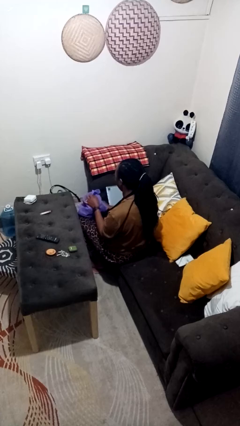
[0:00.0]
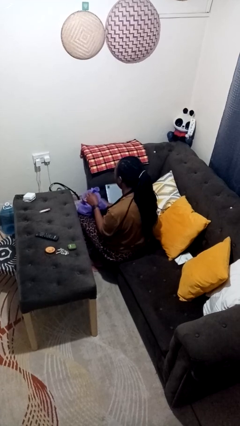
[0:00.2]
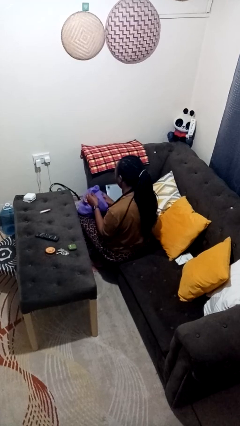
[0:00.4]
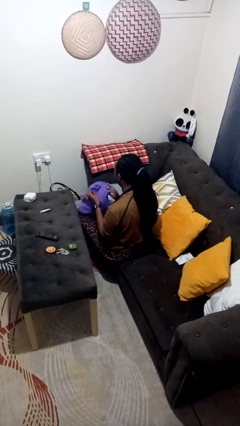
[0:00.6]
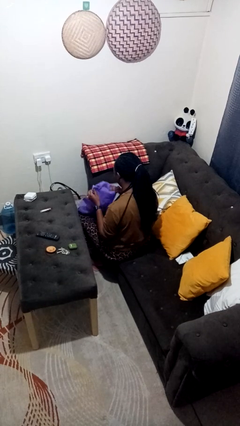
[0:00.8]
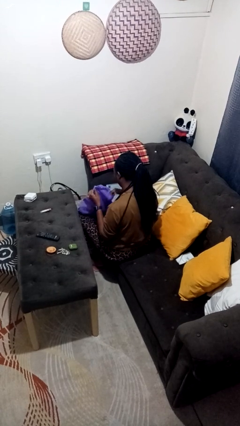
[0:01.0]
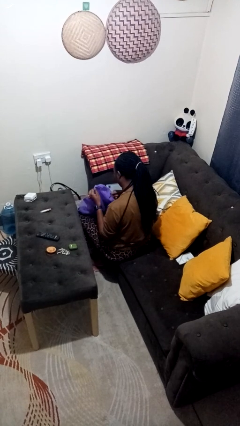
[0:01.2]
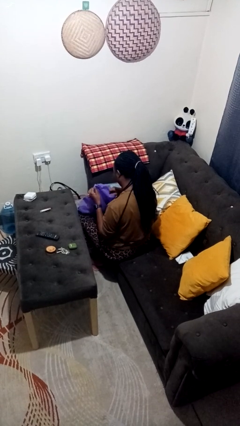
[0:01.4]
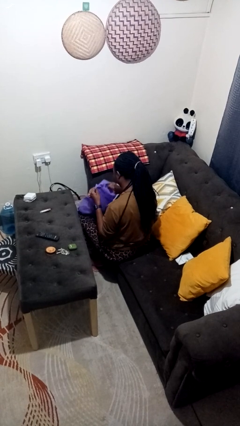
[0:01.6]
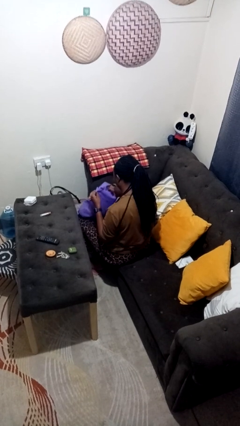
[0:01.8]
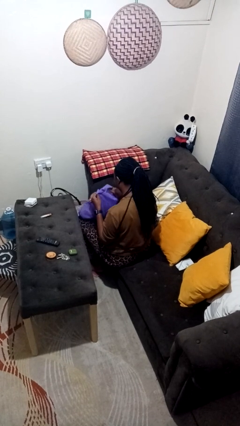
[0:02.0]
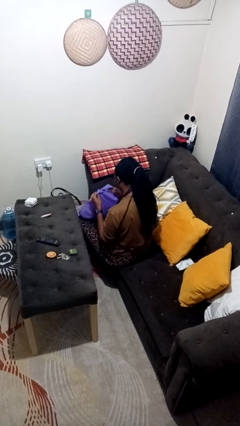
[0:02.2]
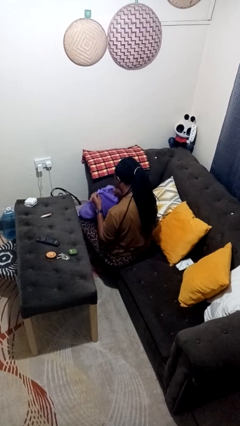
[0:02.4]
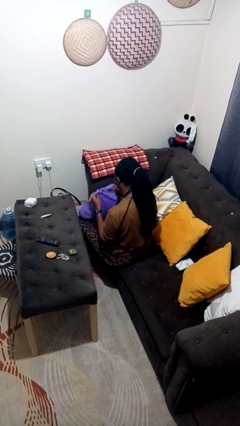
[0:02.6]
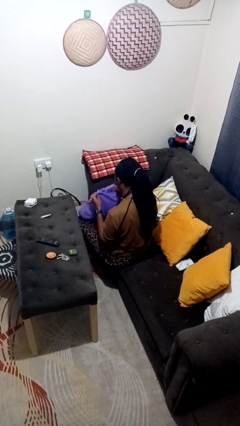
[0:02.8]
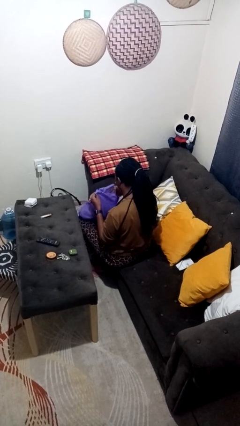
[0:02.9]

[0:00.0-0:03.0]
person searches in bag

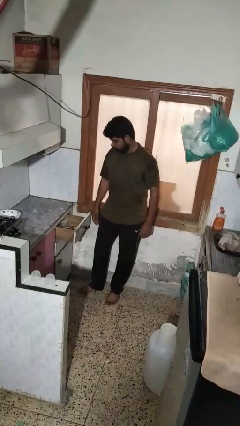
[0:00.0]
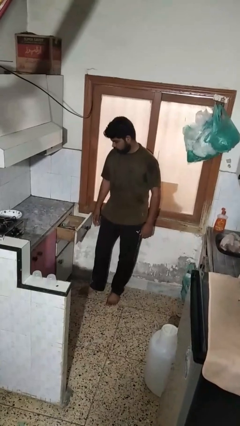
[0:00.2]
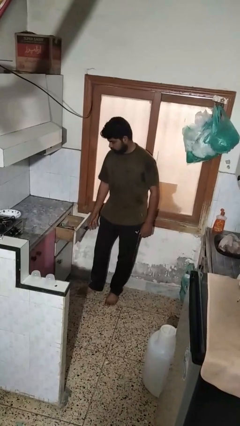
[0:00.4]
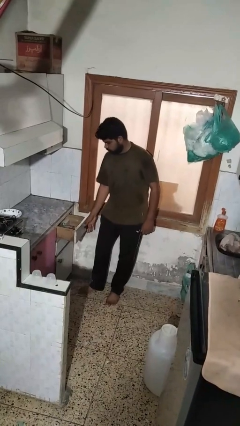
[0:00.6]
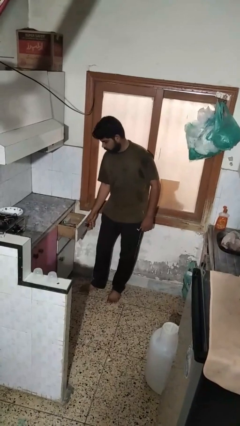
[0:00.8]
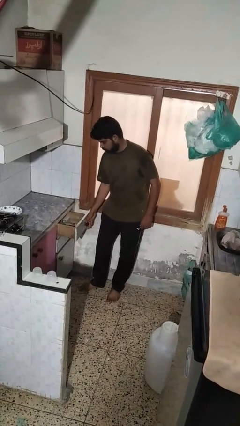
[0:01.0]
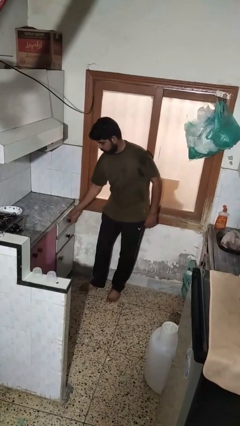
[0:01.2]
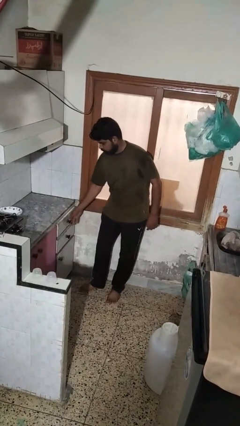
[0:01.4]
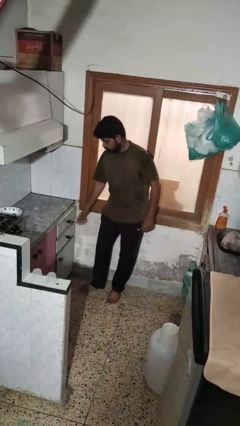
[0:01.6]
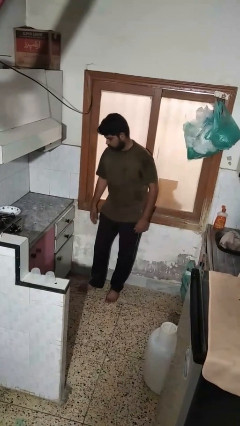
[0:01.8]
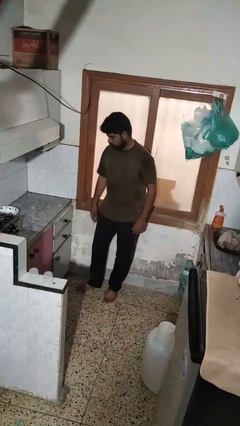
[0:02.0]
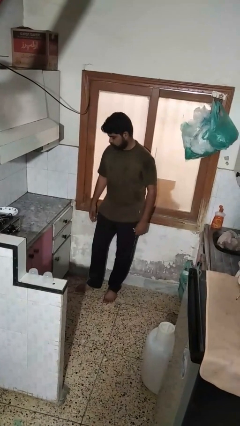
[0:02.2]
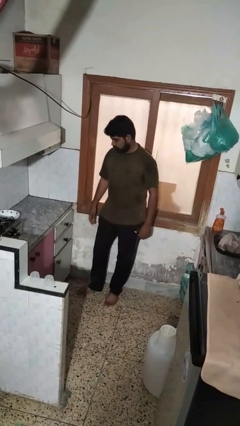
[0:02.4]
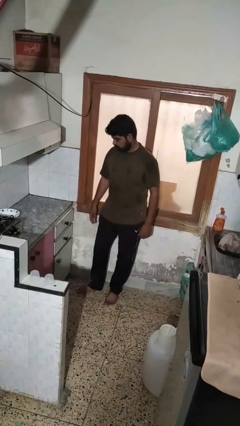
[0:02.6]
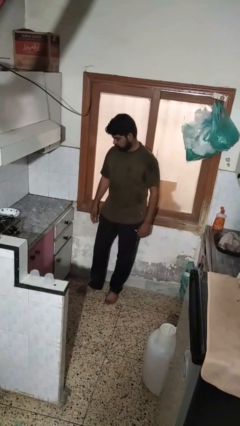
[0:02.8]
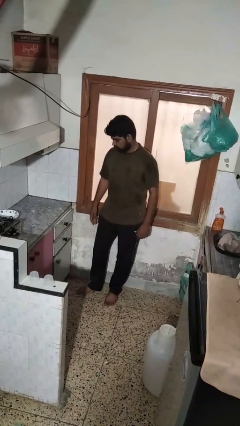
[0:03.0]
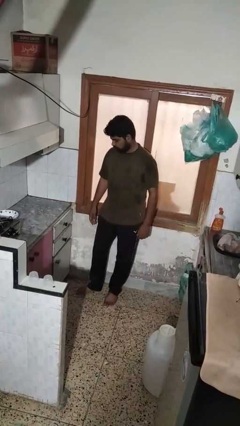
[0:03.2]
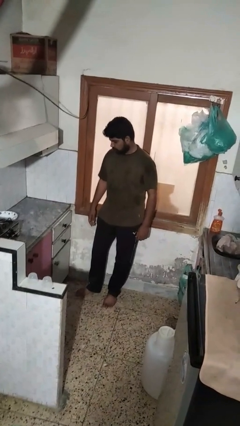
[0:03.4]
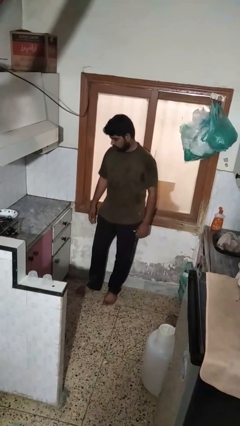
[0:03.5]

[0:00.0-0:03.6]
person closes kitchen drawer

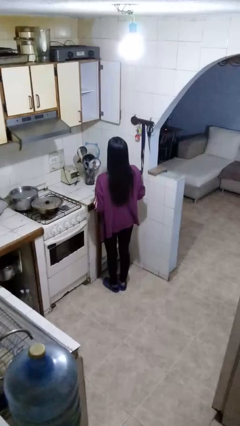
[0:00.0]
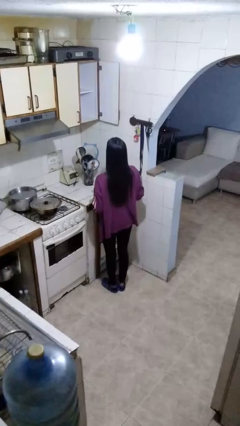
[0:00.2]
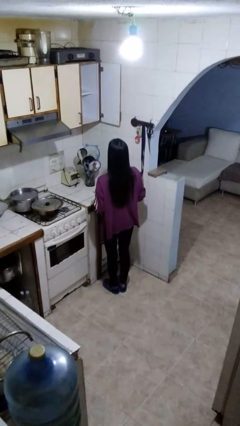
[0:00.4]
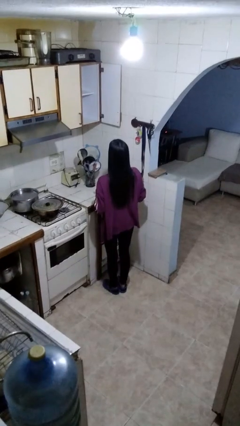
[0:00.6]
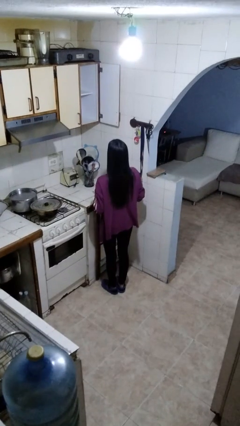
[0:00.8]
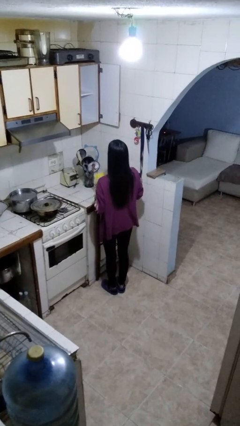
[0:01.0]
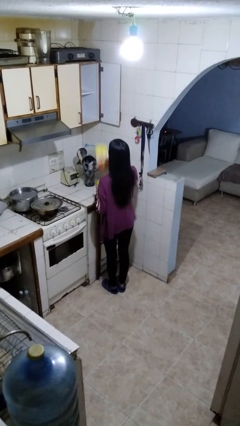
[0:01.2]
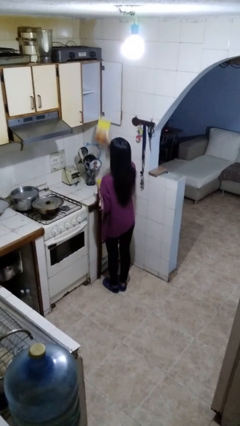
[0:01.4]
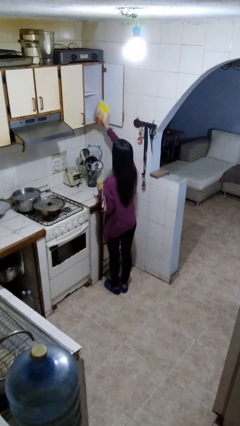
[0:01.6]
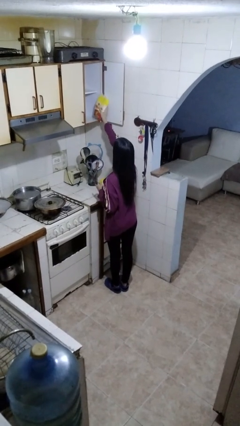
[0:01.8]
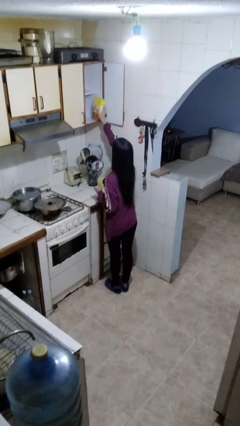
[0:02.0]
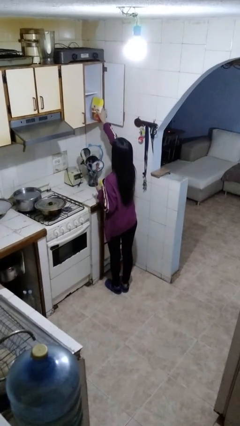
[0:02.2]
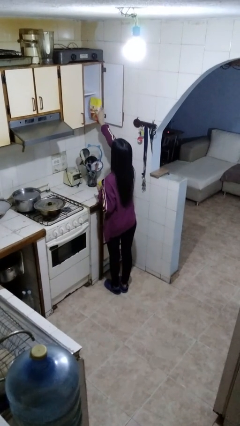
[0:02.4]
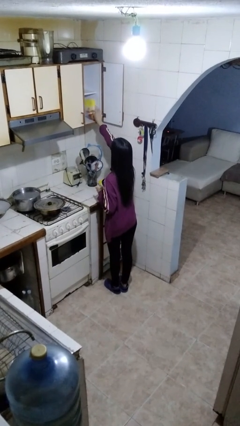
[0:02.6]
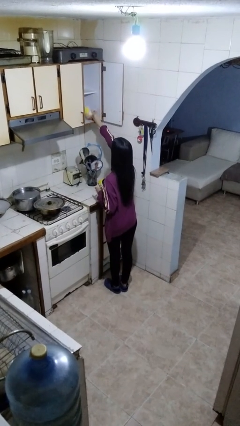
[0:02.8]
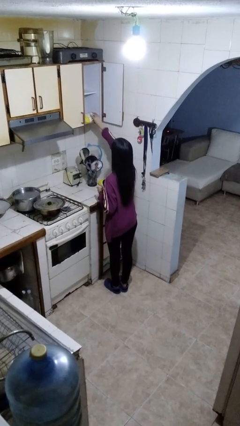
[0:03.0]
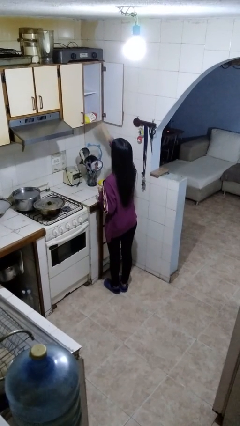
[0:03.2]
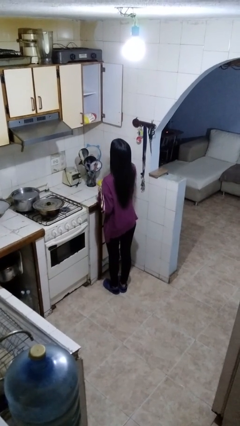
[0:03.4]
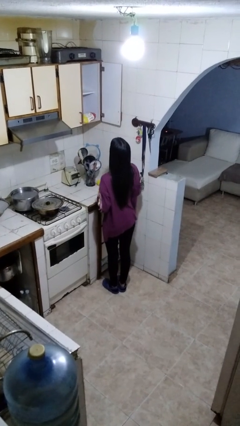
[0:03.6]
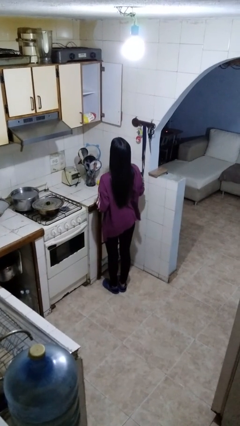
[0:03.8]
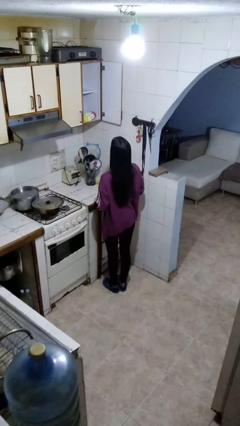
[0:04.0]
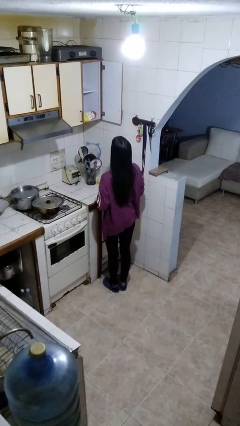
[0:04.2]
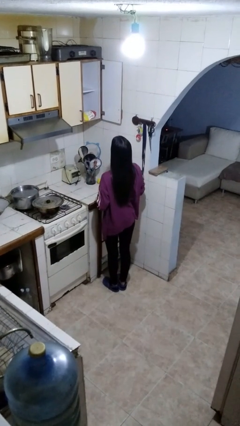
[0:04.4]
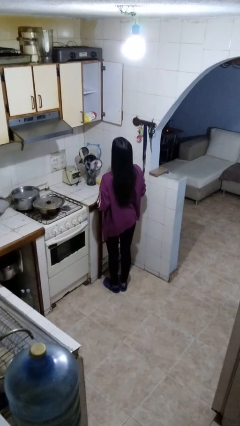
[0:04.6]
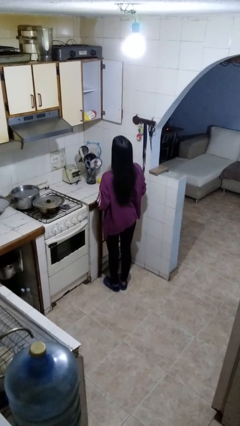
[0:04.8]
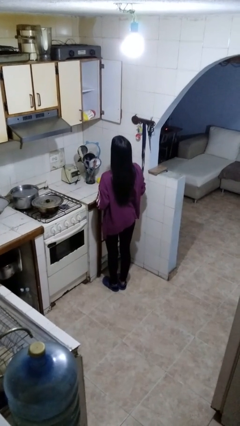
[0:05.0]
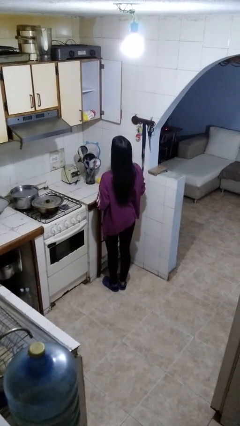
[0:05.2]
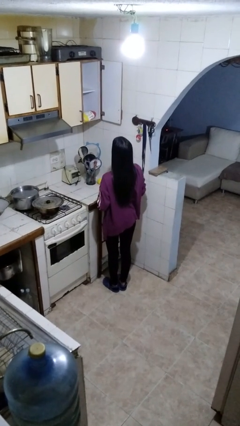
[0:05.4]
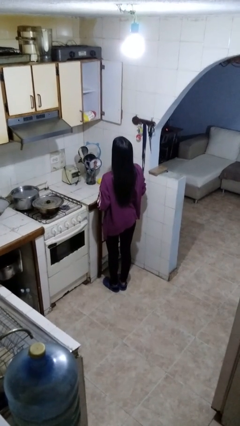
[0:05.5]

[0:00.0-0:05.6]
person picks up object from cabinet

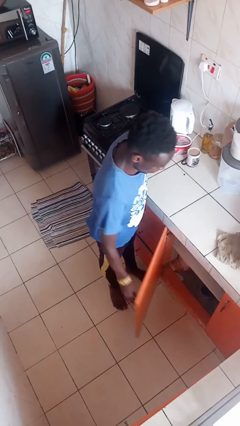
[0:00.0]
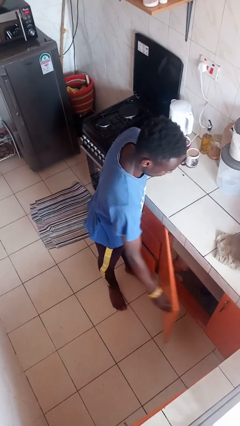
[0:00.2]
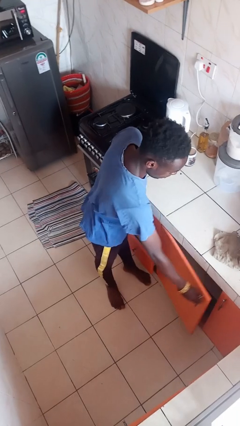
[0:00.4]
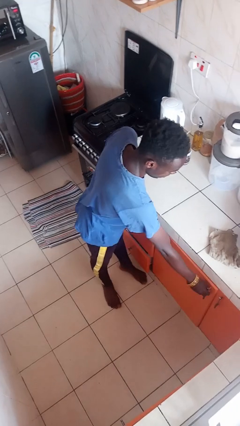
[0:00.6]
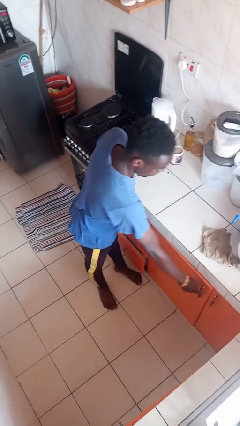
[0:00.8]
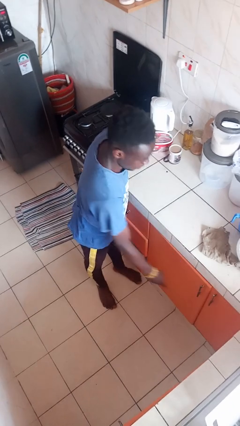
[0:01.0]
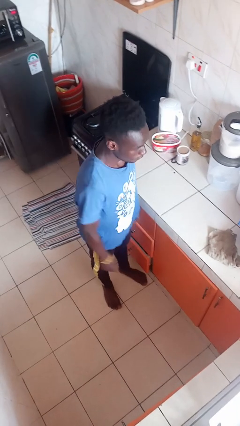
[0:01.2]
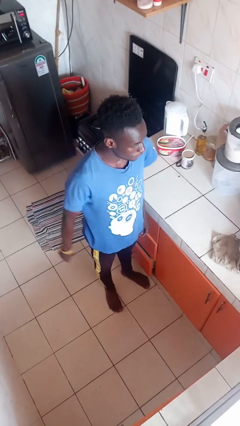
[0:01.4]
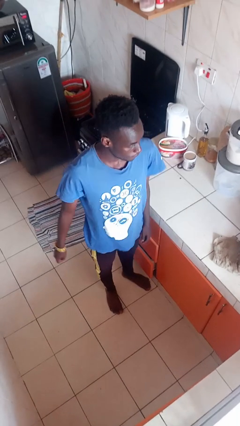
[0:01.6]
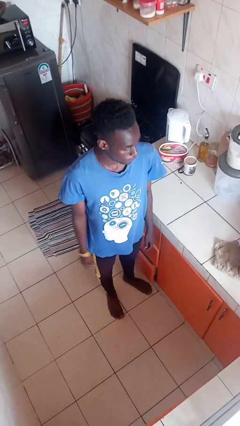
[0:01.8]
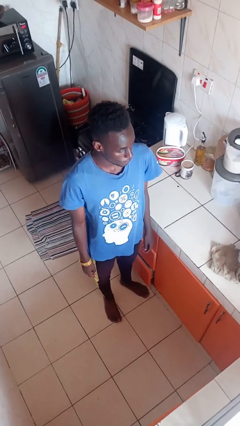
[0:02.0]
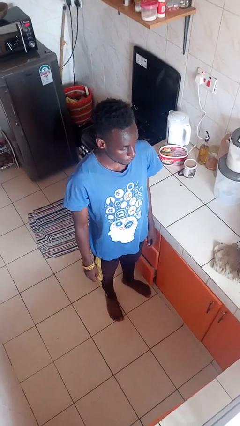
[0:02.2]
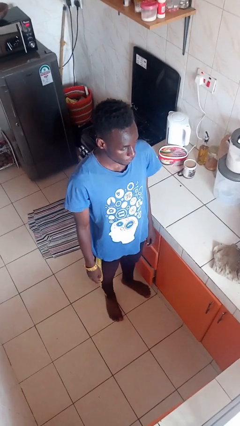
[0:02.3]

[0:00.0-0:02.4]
person closes cabinet

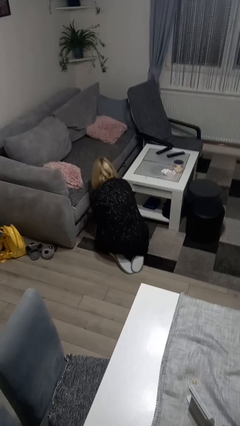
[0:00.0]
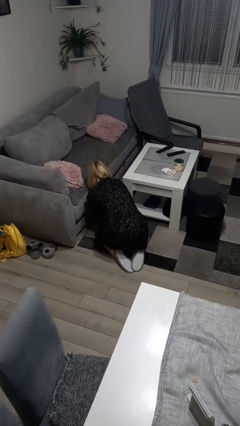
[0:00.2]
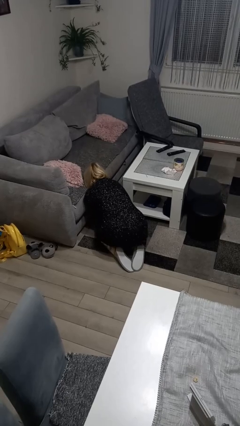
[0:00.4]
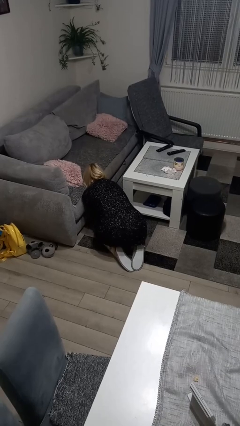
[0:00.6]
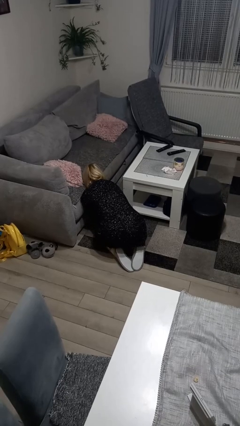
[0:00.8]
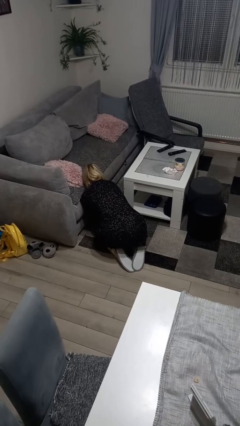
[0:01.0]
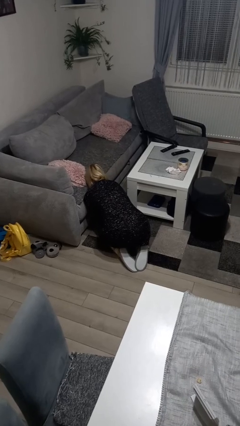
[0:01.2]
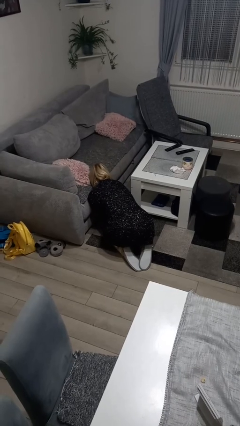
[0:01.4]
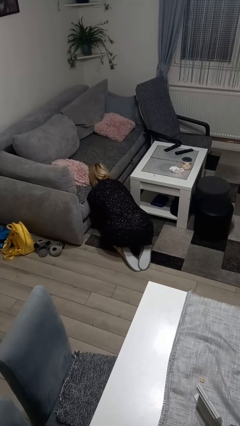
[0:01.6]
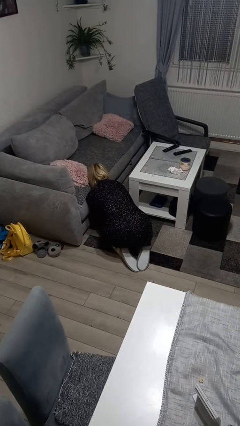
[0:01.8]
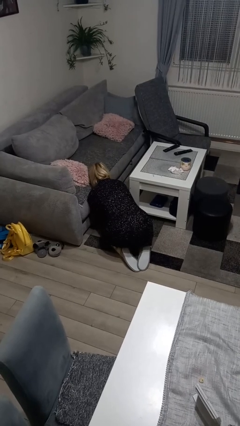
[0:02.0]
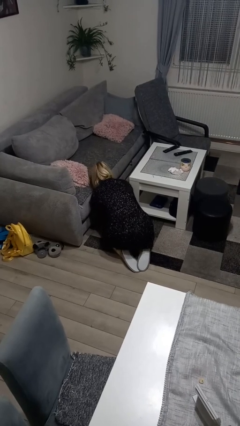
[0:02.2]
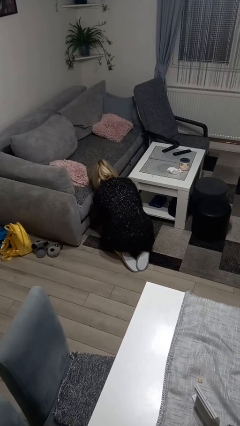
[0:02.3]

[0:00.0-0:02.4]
person searches under couch

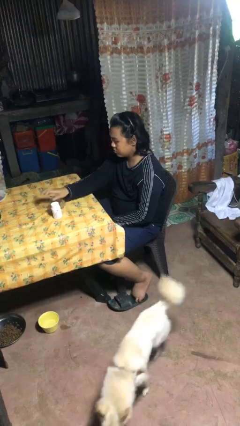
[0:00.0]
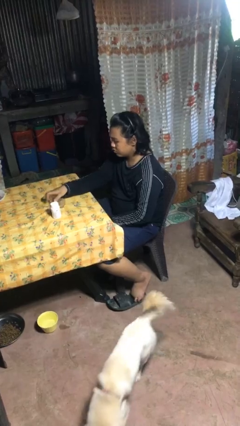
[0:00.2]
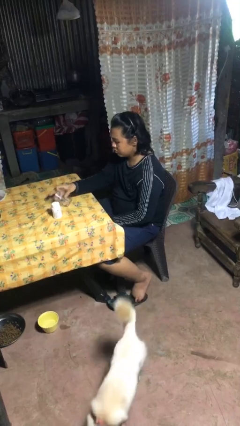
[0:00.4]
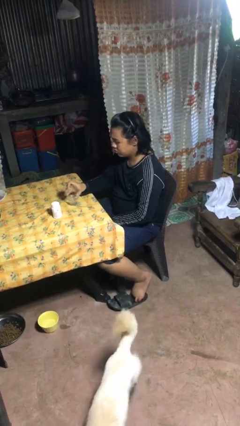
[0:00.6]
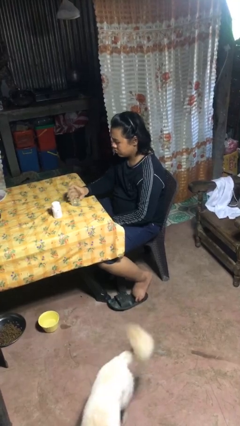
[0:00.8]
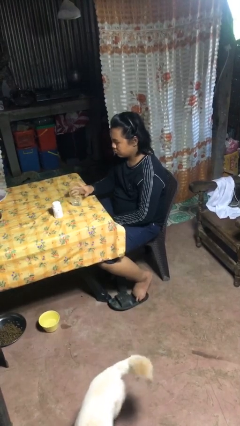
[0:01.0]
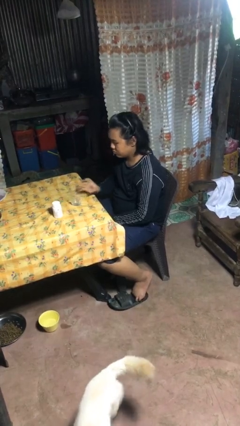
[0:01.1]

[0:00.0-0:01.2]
person sets upright glass
